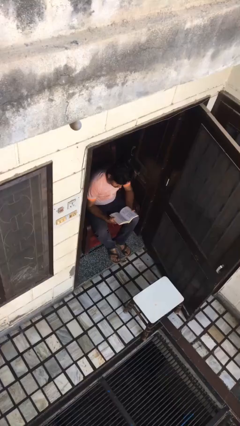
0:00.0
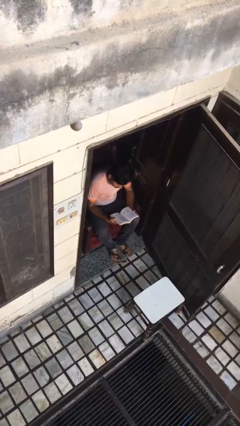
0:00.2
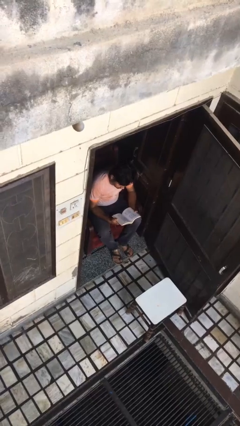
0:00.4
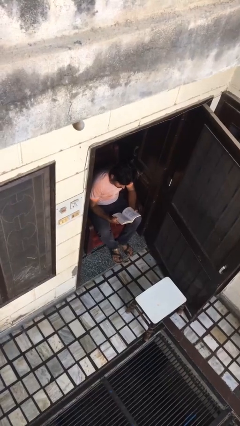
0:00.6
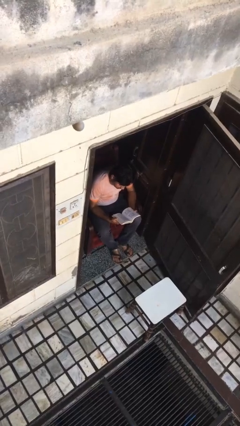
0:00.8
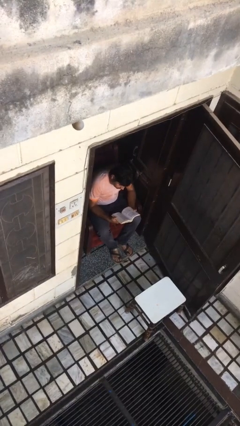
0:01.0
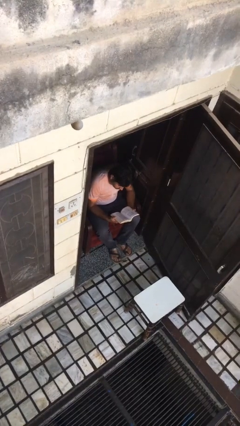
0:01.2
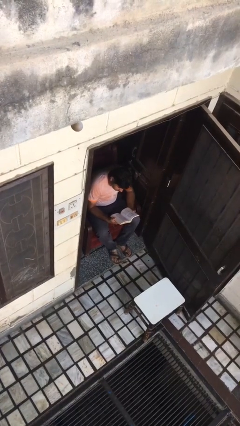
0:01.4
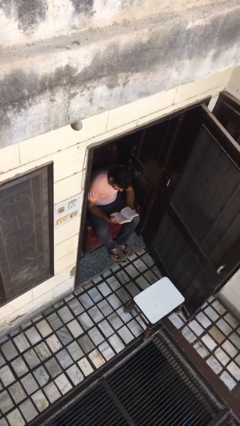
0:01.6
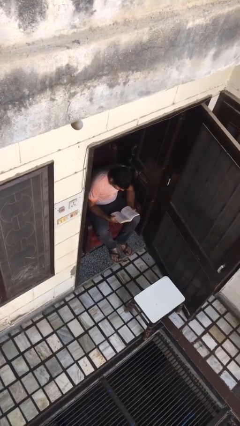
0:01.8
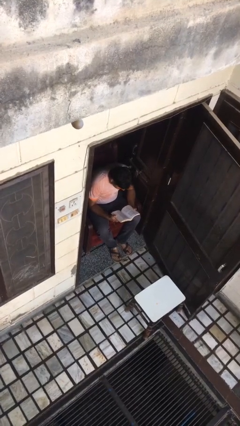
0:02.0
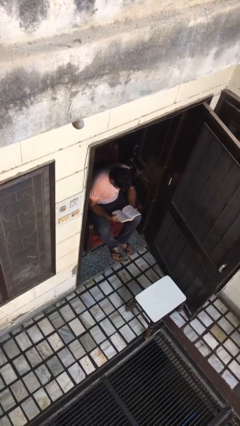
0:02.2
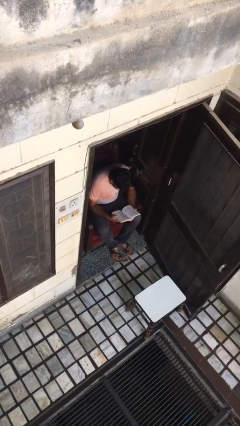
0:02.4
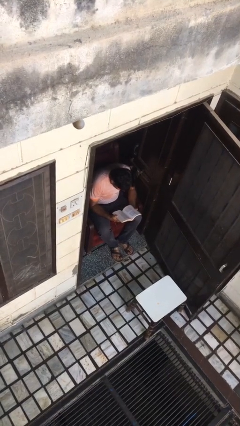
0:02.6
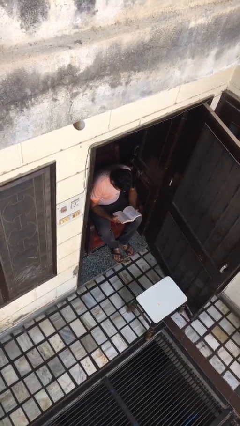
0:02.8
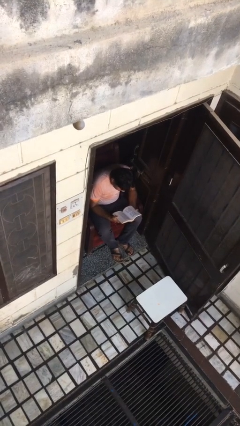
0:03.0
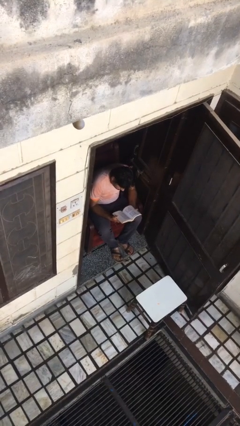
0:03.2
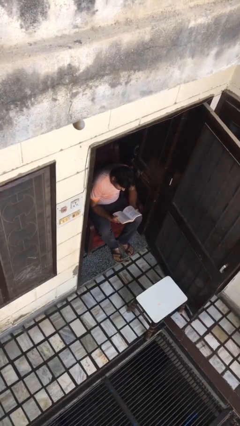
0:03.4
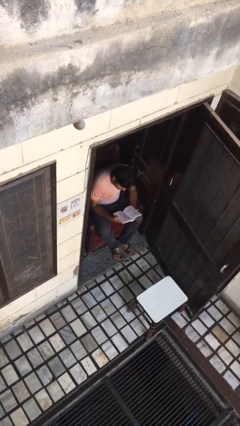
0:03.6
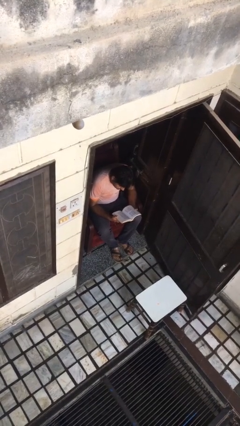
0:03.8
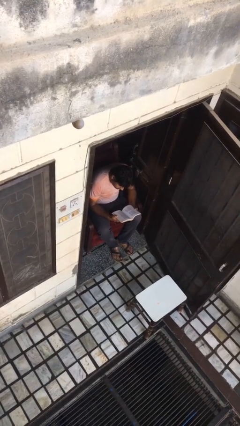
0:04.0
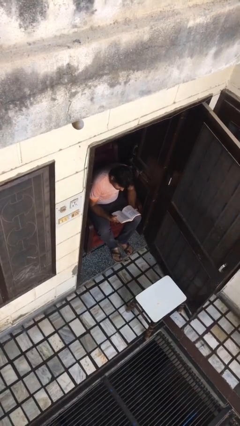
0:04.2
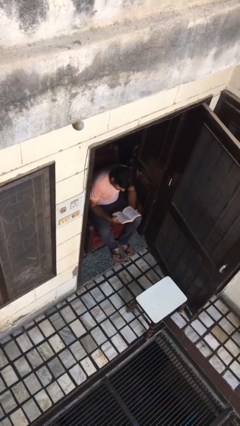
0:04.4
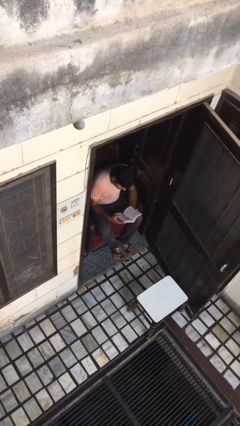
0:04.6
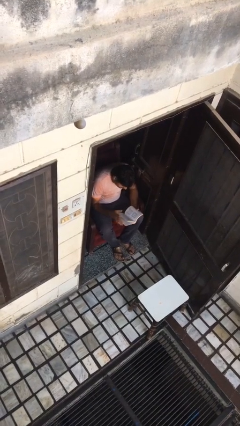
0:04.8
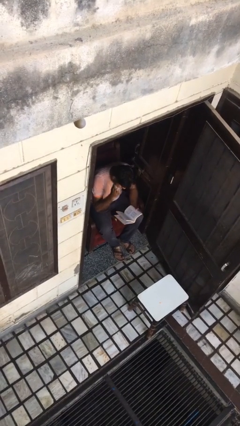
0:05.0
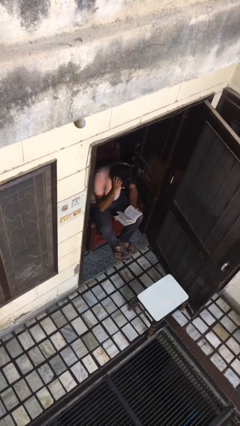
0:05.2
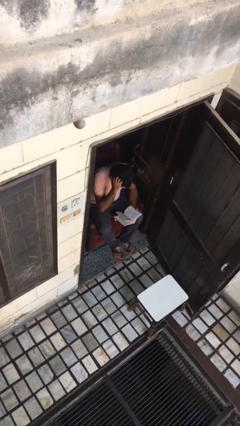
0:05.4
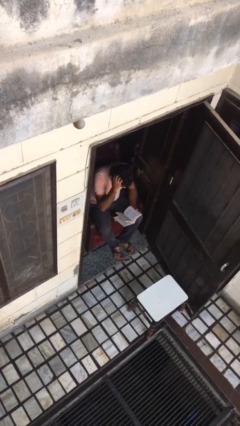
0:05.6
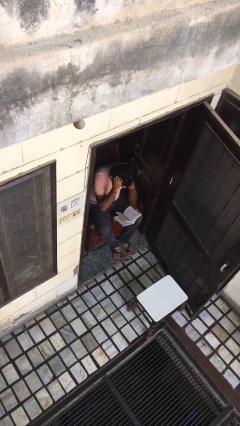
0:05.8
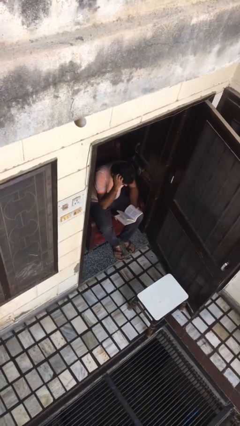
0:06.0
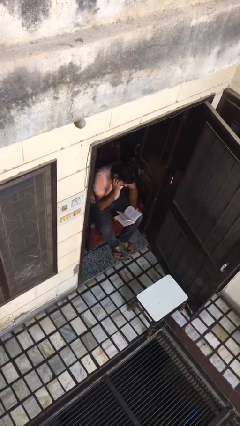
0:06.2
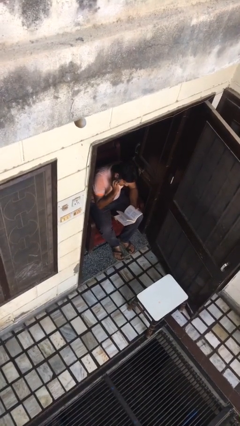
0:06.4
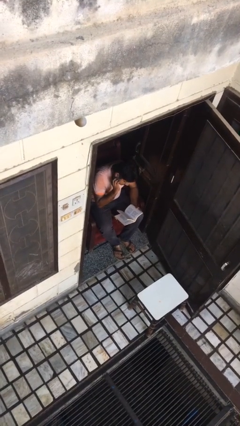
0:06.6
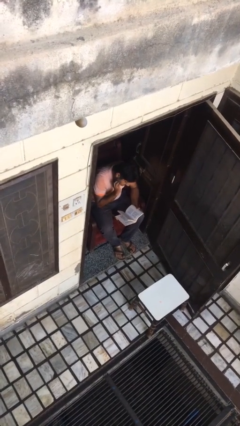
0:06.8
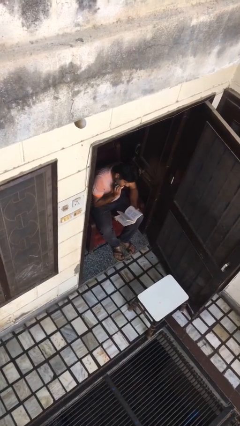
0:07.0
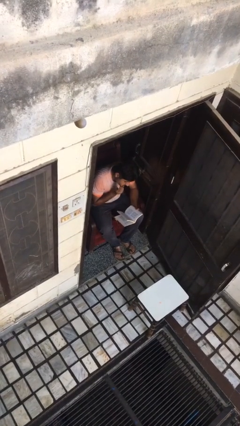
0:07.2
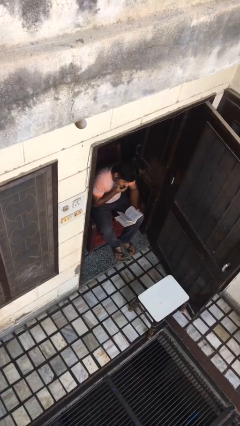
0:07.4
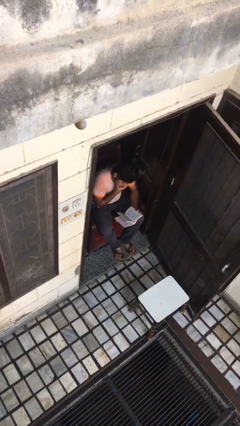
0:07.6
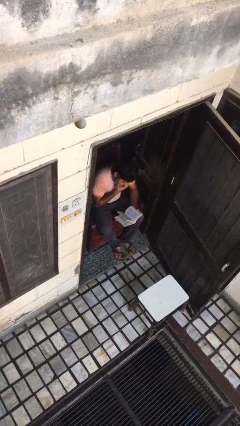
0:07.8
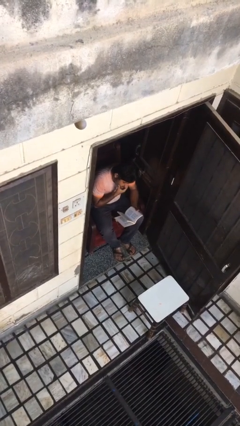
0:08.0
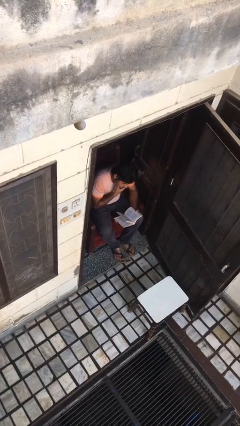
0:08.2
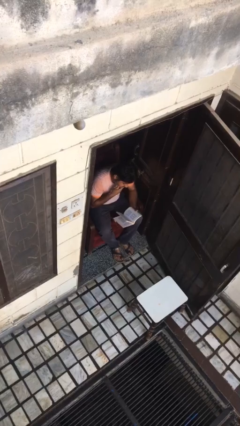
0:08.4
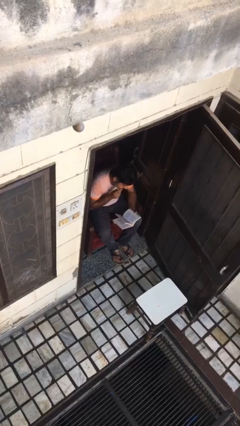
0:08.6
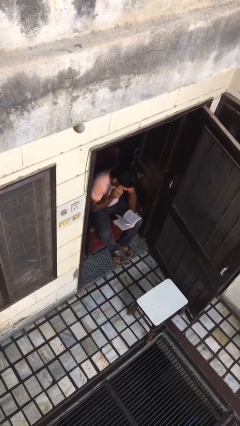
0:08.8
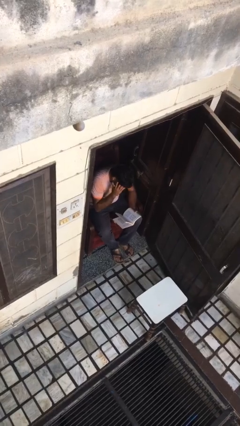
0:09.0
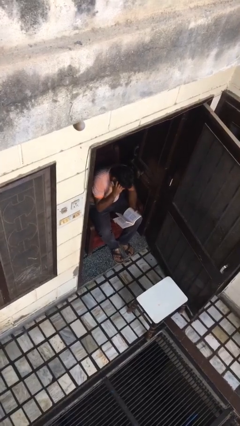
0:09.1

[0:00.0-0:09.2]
person reads document

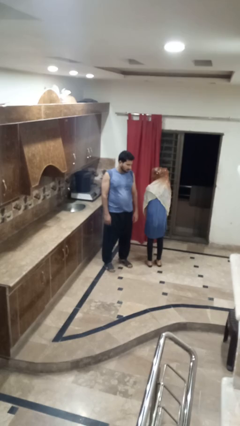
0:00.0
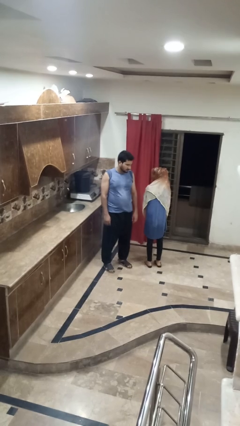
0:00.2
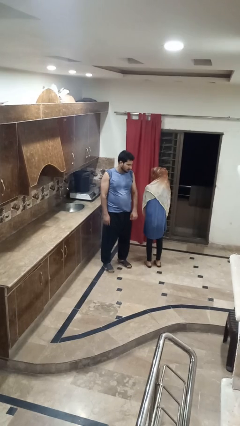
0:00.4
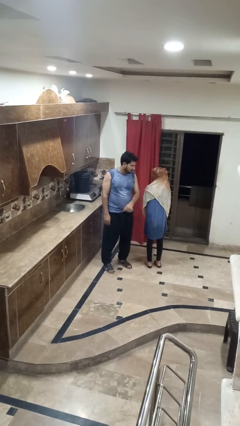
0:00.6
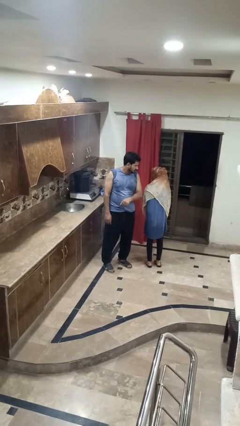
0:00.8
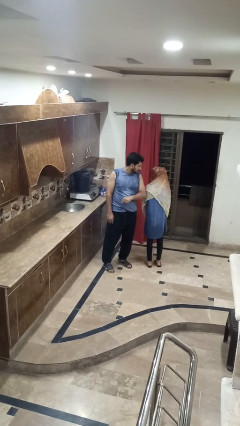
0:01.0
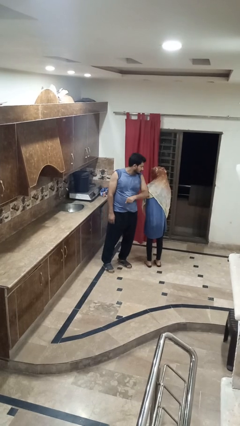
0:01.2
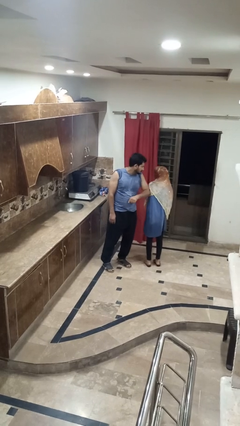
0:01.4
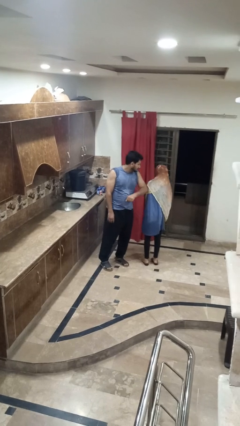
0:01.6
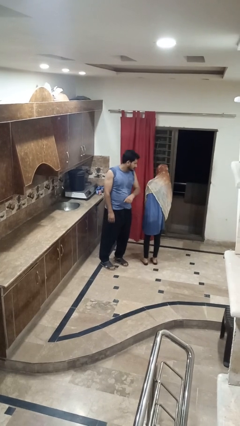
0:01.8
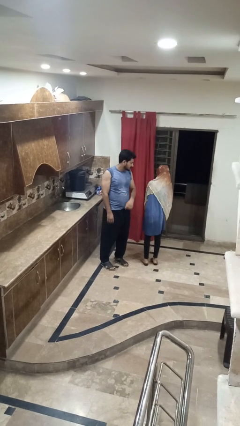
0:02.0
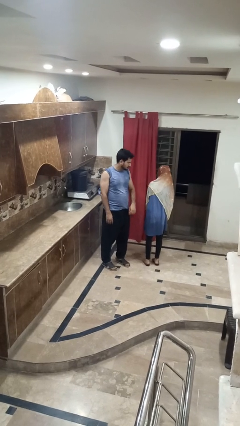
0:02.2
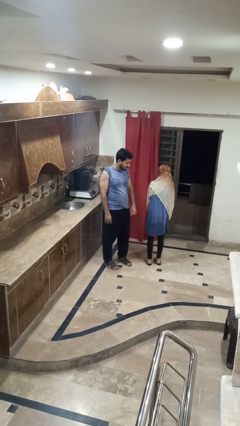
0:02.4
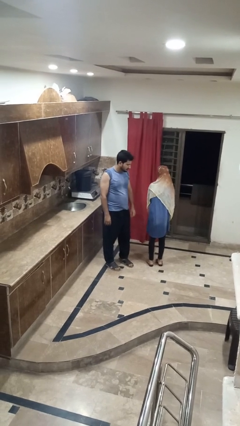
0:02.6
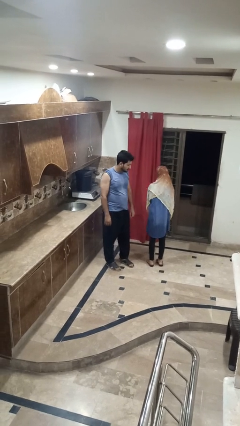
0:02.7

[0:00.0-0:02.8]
person nudges person with elbow

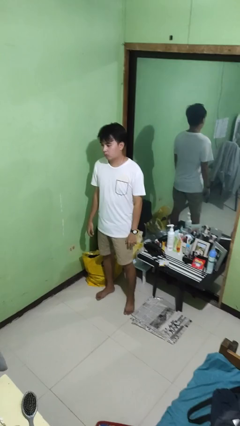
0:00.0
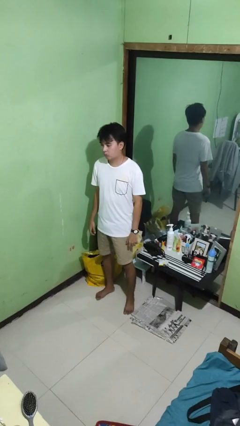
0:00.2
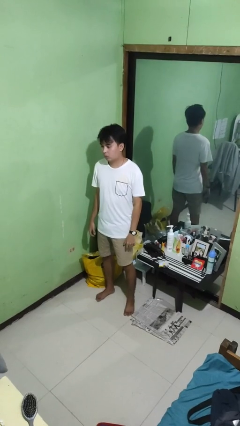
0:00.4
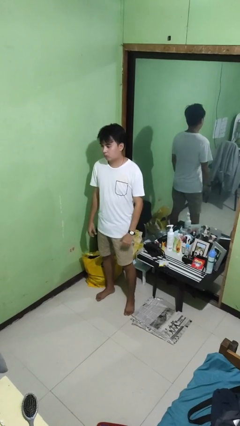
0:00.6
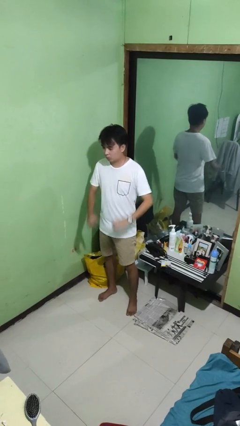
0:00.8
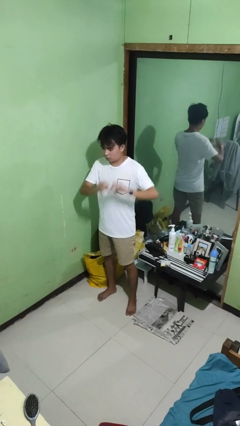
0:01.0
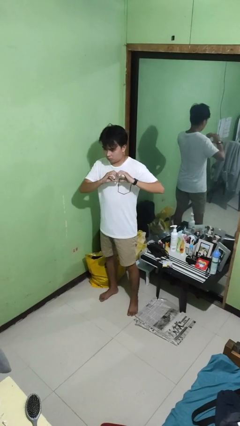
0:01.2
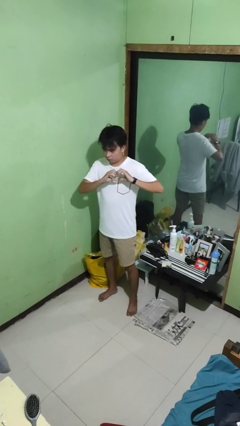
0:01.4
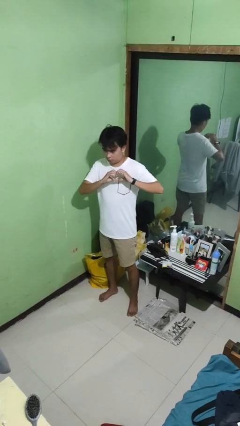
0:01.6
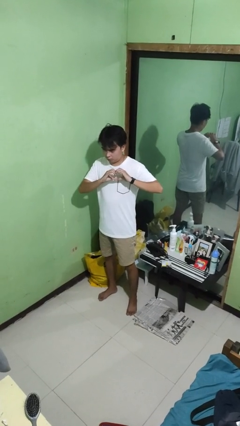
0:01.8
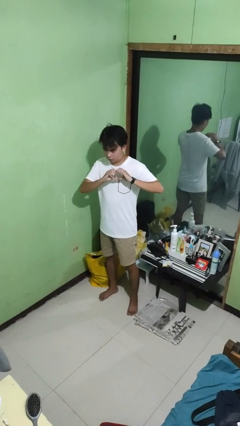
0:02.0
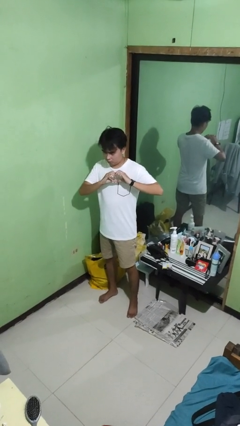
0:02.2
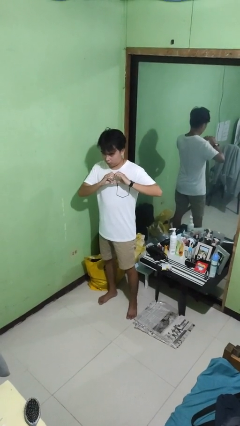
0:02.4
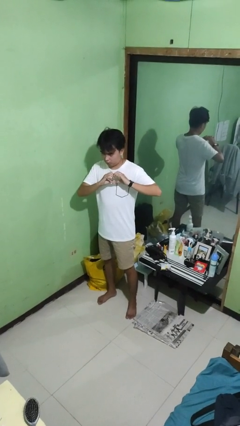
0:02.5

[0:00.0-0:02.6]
person gestures heart

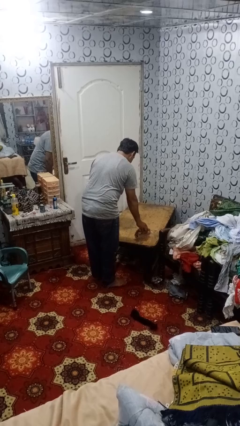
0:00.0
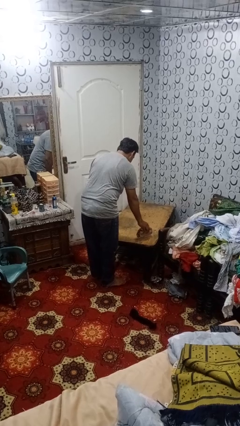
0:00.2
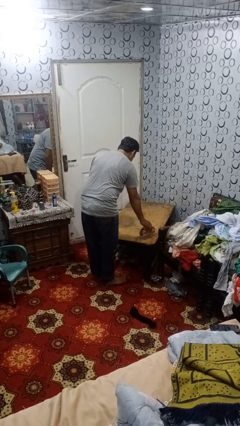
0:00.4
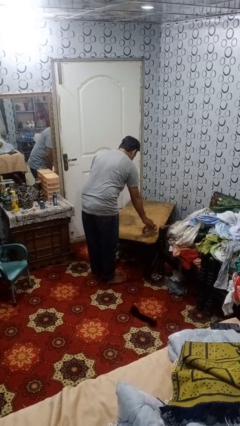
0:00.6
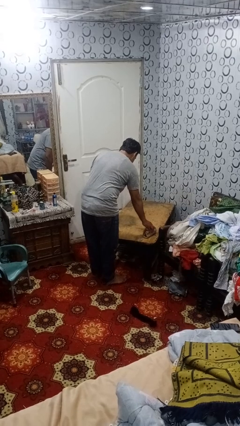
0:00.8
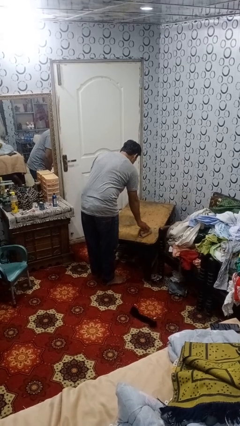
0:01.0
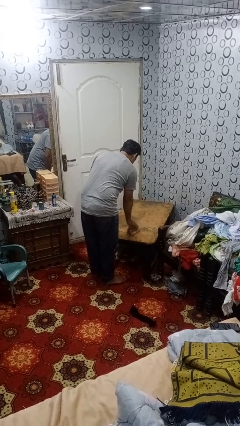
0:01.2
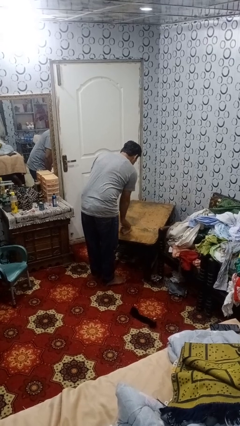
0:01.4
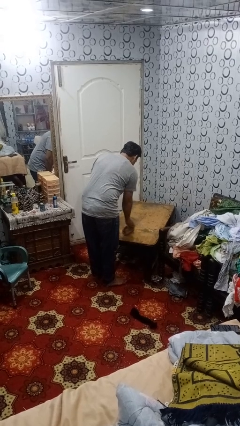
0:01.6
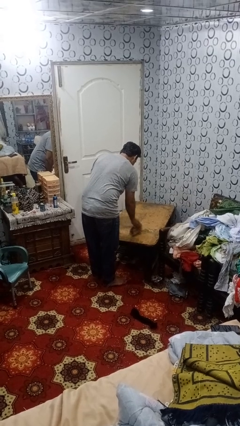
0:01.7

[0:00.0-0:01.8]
person cleans table with rag

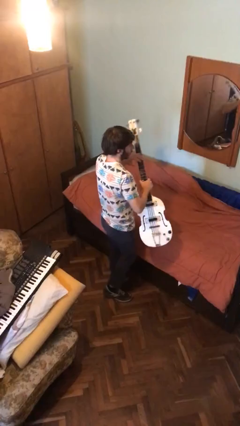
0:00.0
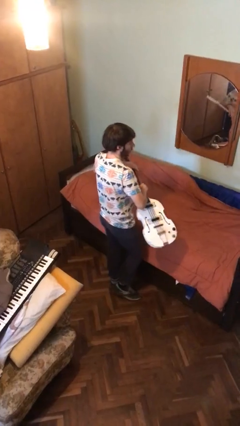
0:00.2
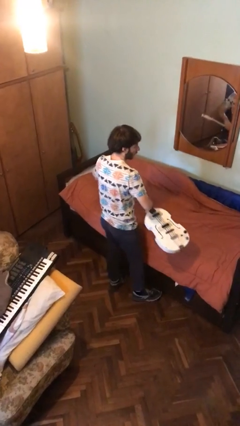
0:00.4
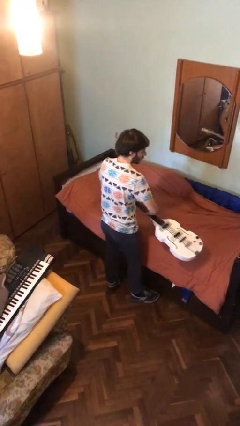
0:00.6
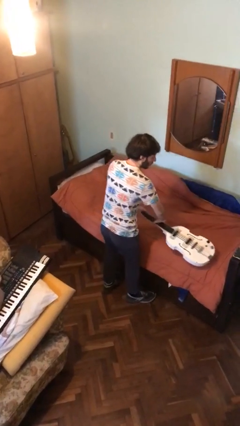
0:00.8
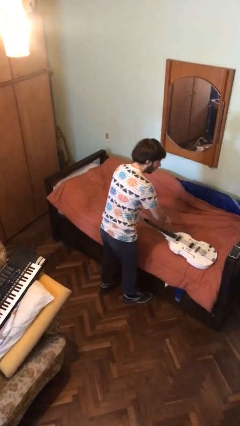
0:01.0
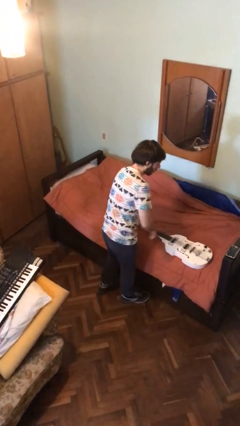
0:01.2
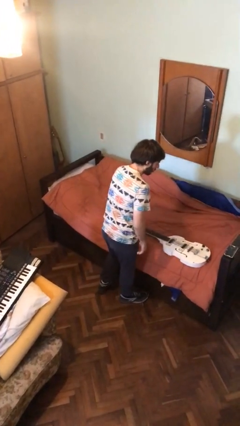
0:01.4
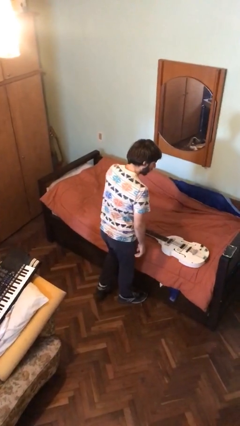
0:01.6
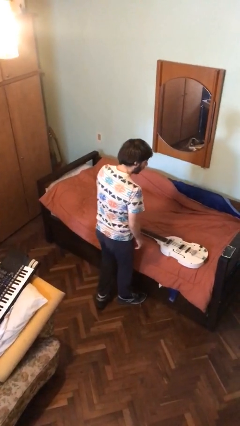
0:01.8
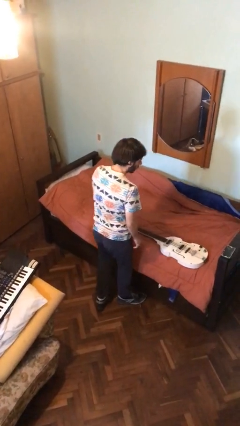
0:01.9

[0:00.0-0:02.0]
person puts down object on bed
